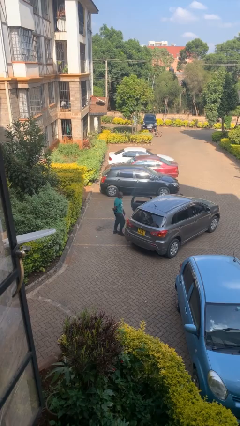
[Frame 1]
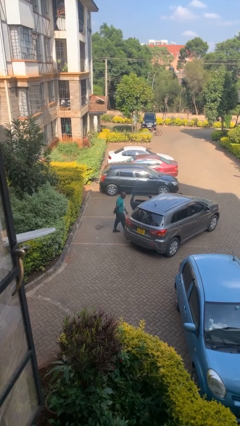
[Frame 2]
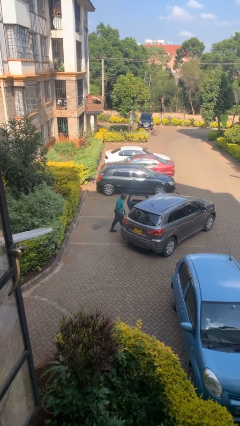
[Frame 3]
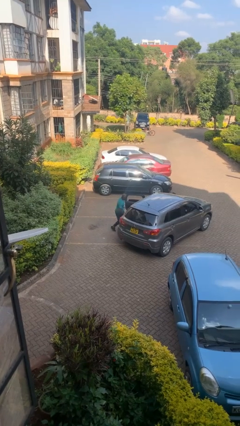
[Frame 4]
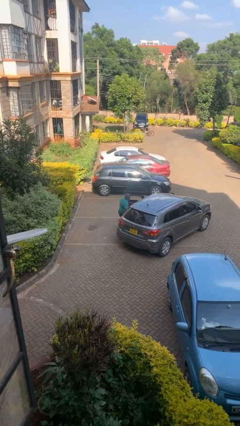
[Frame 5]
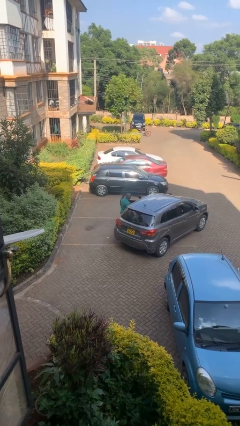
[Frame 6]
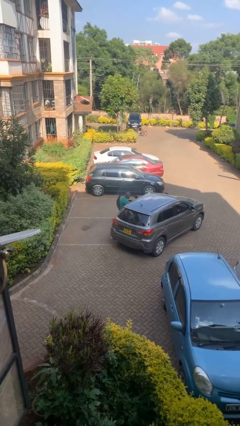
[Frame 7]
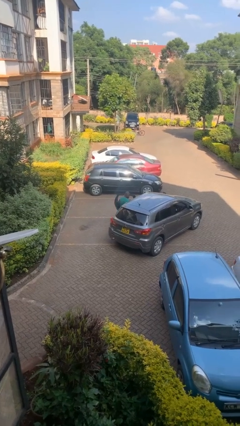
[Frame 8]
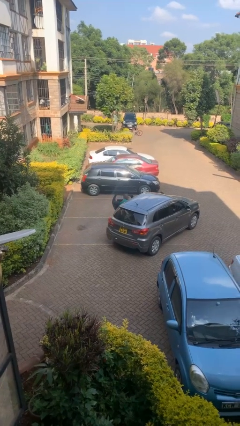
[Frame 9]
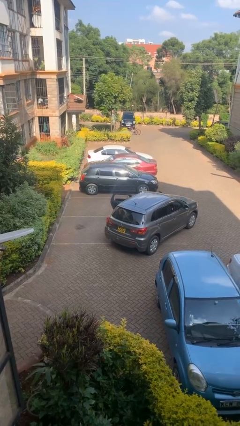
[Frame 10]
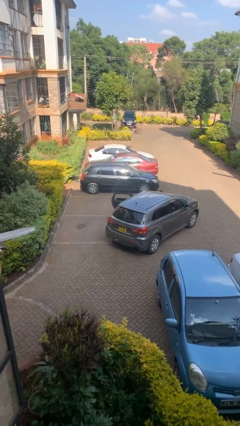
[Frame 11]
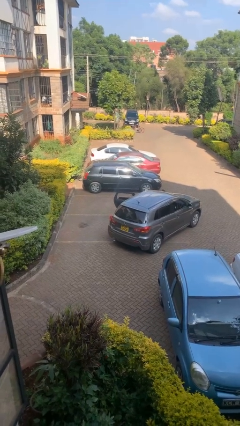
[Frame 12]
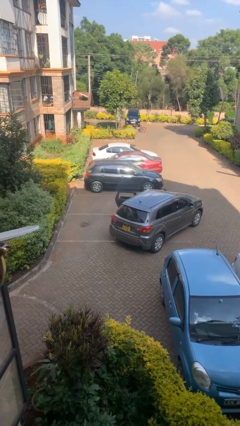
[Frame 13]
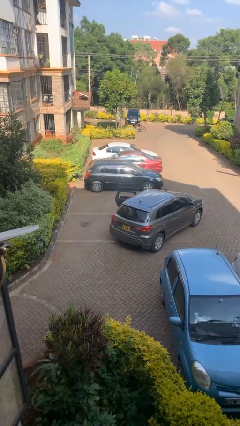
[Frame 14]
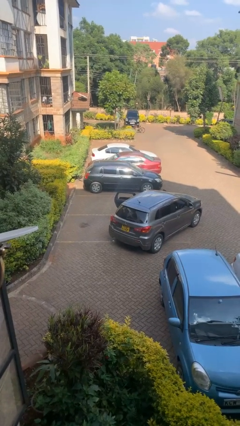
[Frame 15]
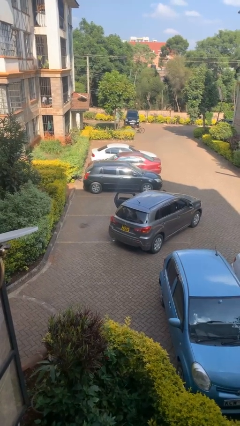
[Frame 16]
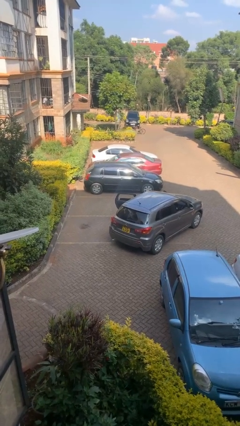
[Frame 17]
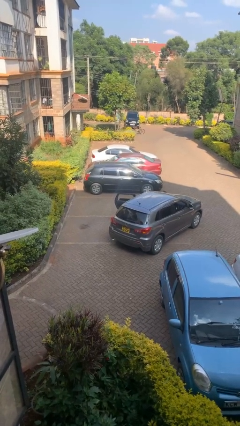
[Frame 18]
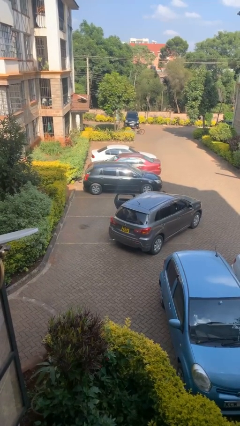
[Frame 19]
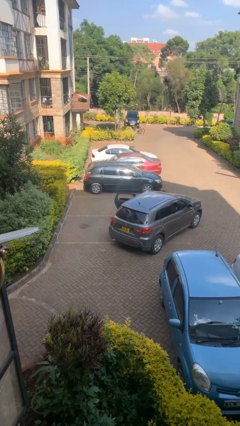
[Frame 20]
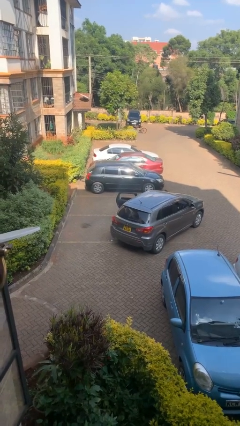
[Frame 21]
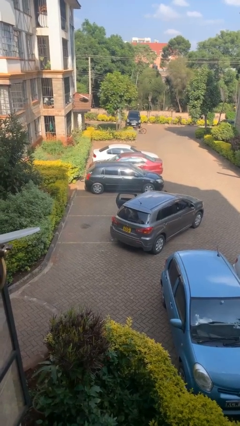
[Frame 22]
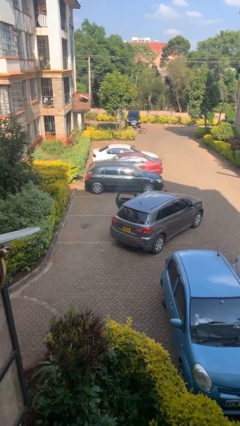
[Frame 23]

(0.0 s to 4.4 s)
person enters car

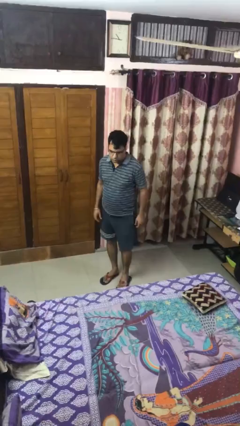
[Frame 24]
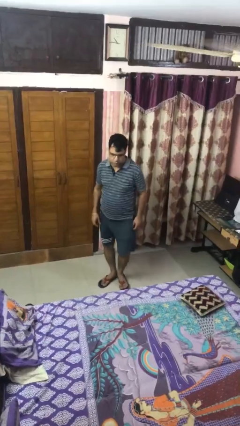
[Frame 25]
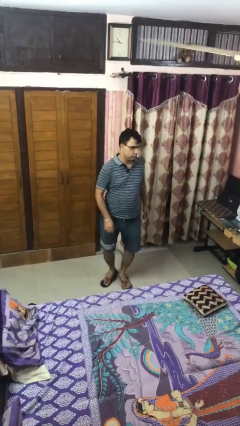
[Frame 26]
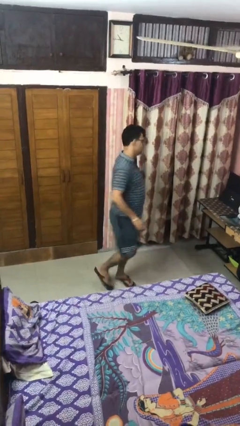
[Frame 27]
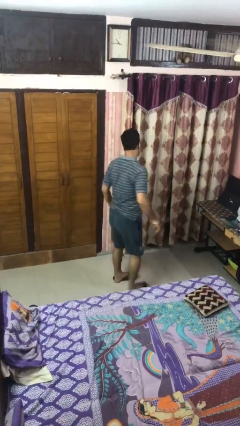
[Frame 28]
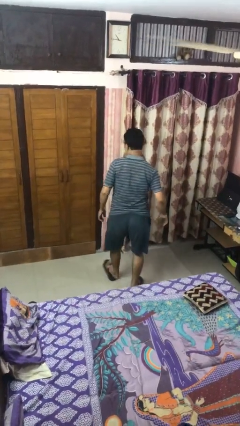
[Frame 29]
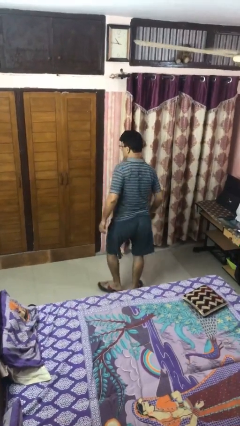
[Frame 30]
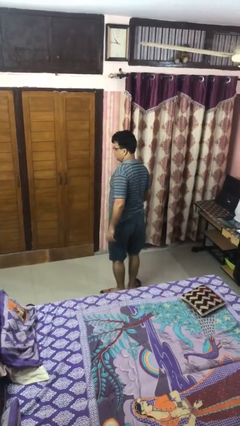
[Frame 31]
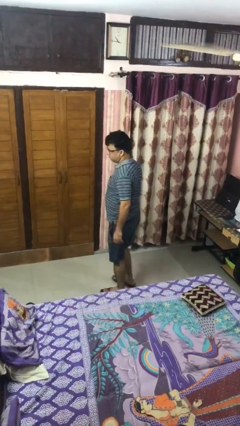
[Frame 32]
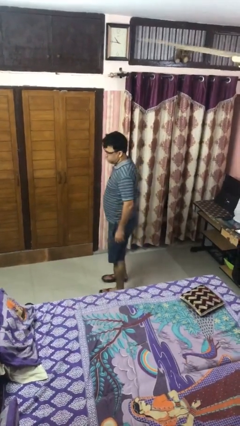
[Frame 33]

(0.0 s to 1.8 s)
person twirls

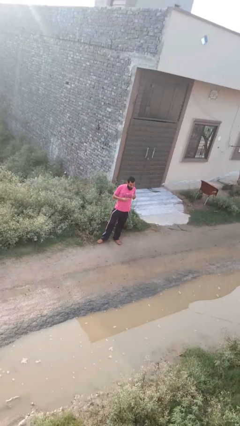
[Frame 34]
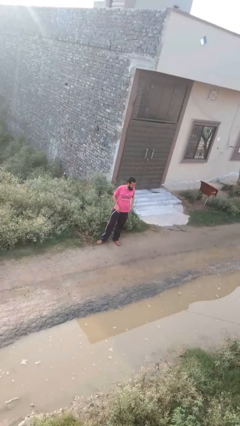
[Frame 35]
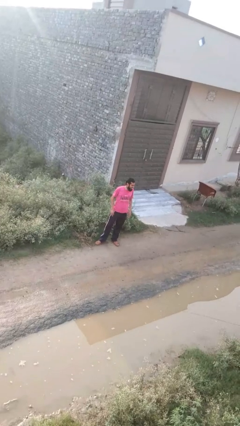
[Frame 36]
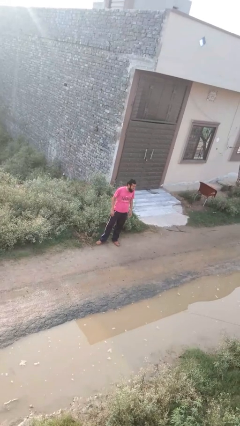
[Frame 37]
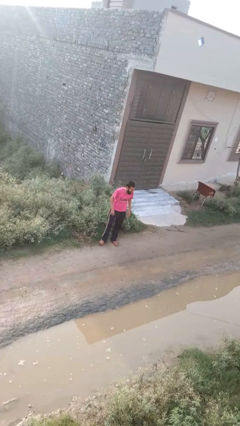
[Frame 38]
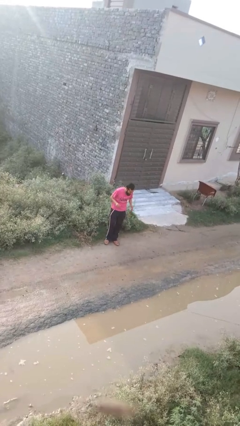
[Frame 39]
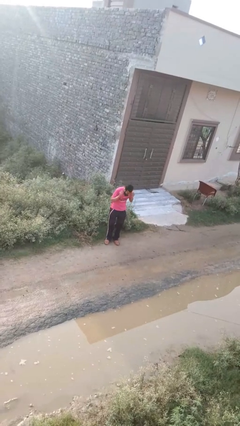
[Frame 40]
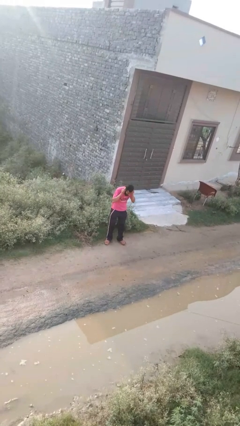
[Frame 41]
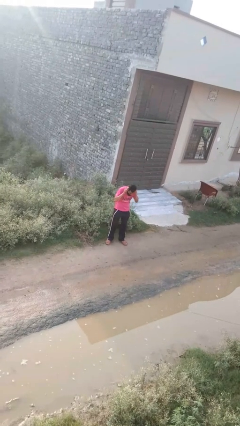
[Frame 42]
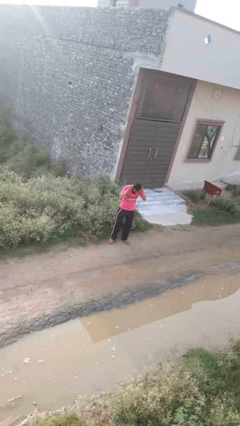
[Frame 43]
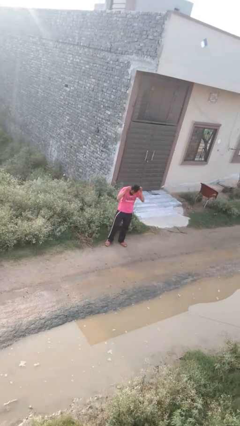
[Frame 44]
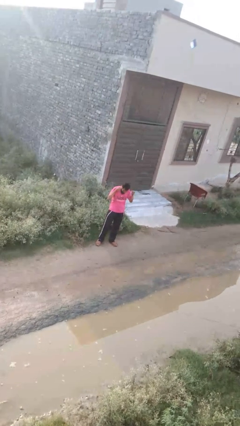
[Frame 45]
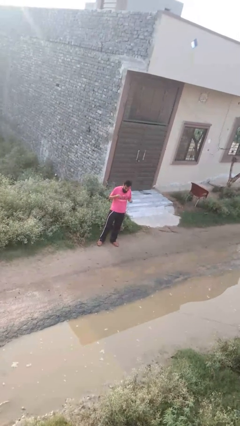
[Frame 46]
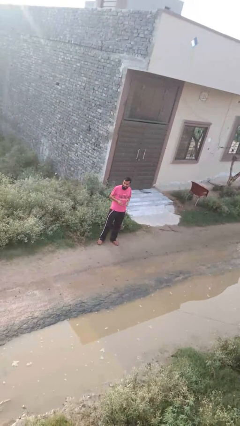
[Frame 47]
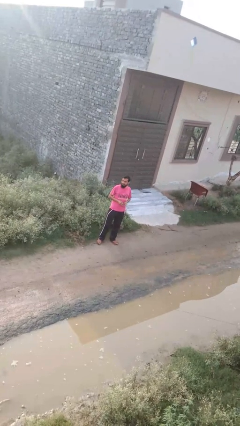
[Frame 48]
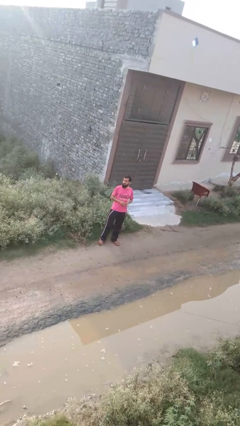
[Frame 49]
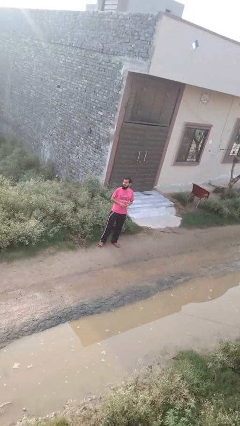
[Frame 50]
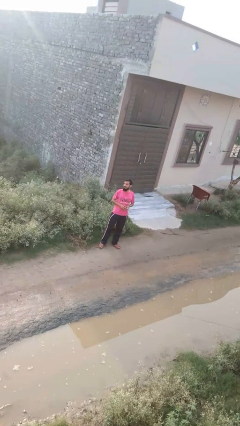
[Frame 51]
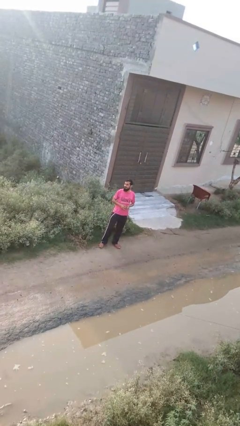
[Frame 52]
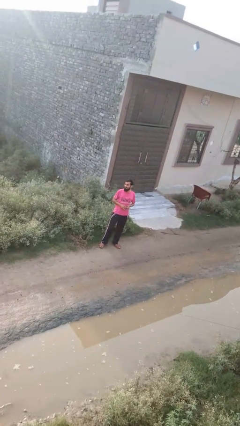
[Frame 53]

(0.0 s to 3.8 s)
person takes off earrings

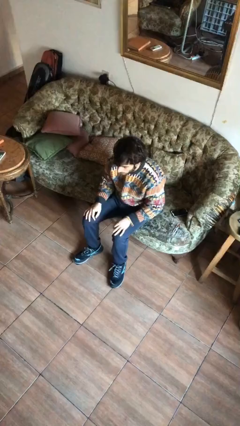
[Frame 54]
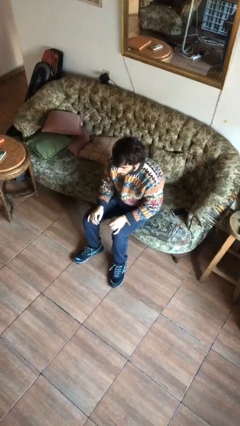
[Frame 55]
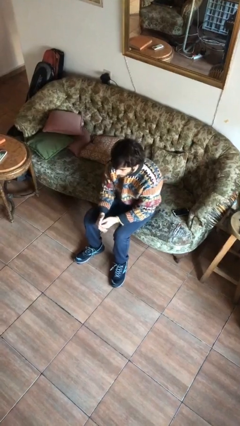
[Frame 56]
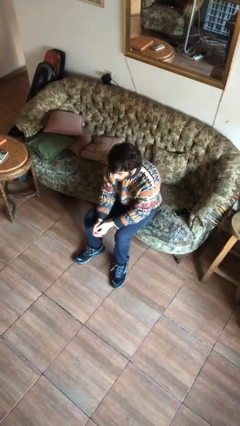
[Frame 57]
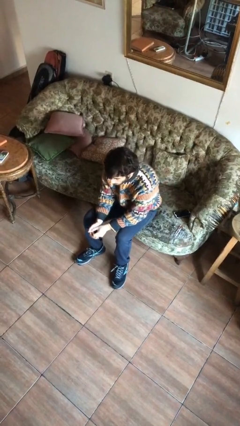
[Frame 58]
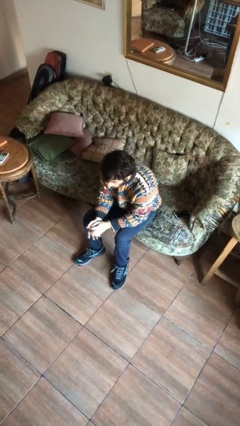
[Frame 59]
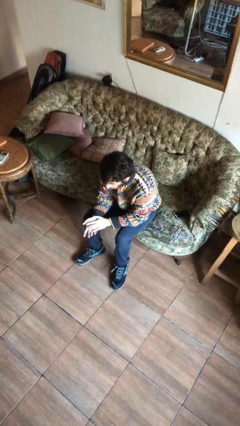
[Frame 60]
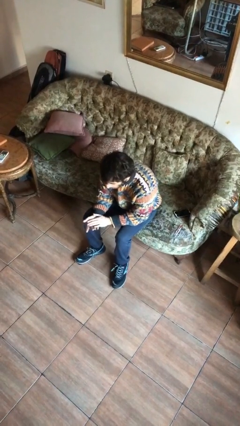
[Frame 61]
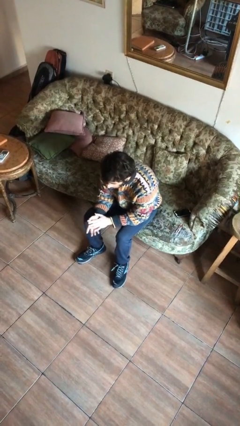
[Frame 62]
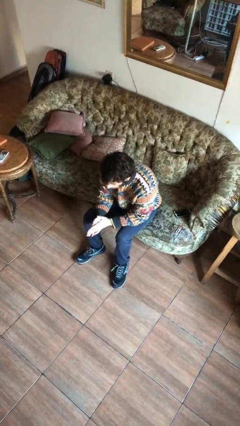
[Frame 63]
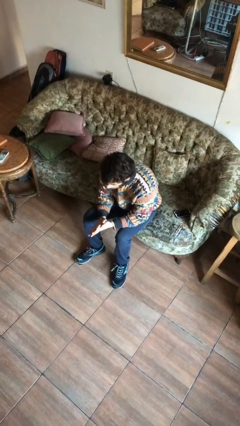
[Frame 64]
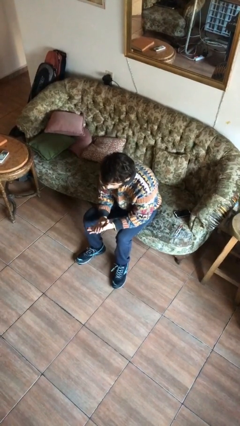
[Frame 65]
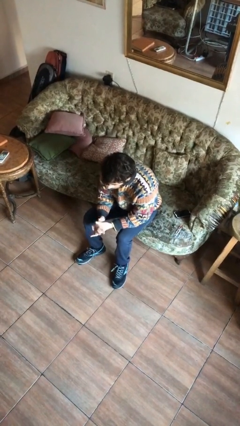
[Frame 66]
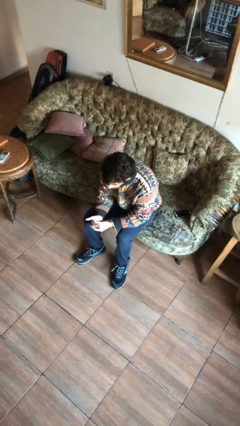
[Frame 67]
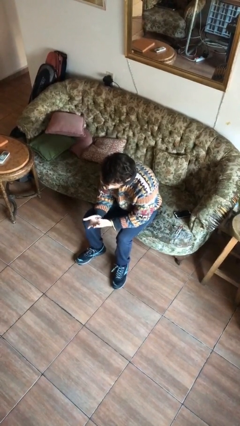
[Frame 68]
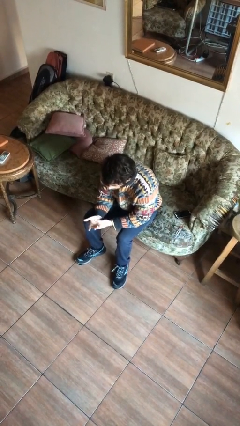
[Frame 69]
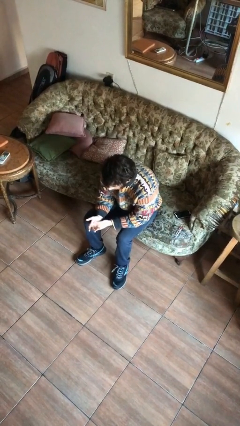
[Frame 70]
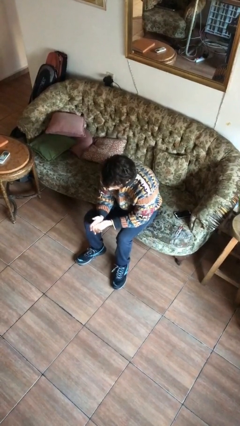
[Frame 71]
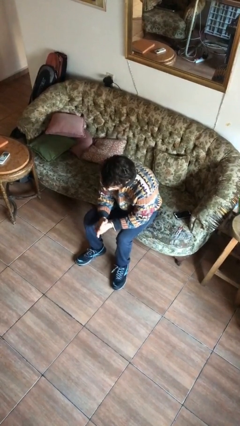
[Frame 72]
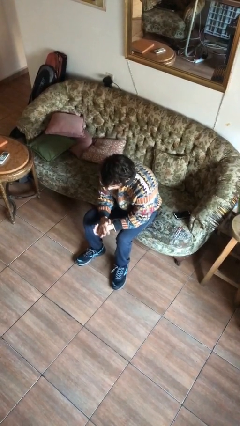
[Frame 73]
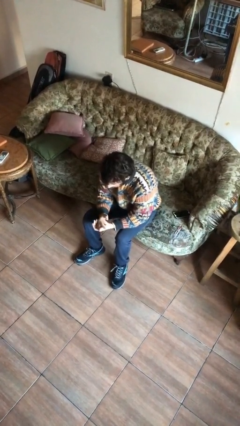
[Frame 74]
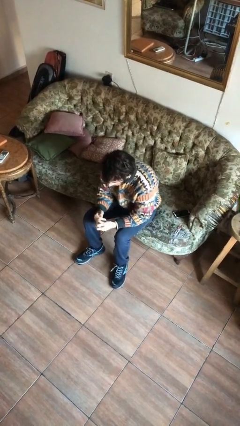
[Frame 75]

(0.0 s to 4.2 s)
person looks at hands in lap

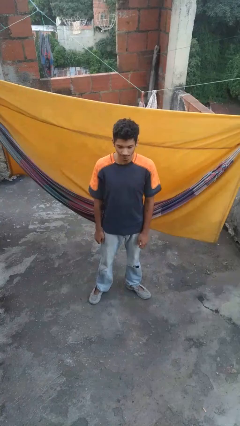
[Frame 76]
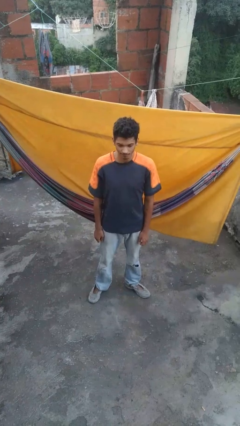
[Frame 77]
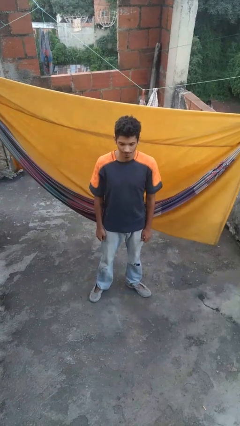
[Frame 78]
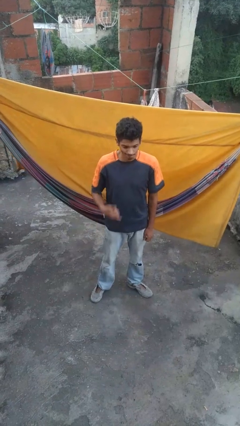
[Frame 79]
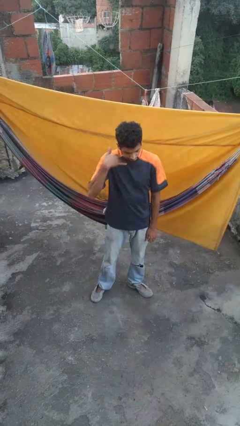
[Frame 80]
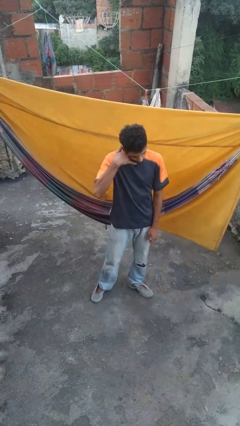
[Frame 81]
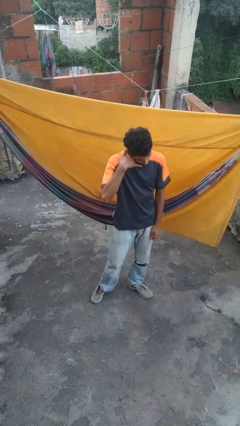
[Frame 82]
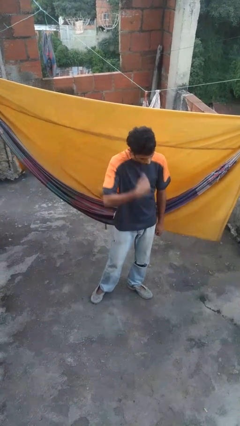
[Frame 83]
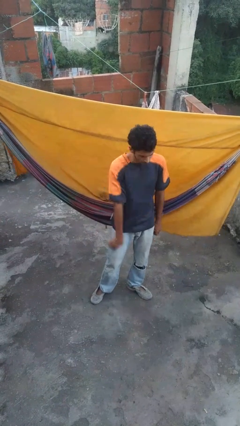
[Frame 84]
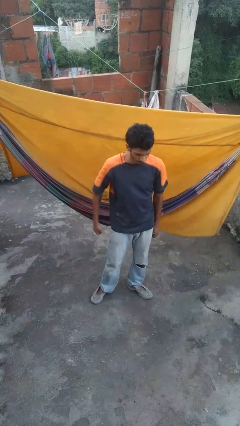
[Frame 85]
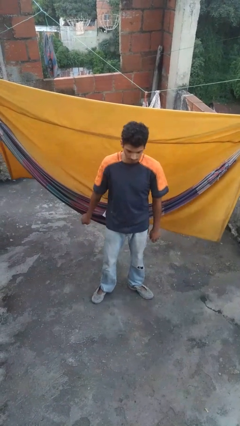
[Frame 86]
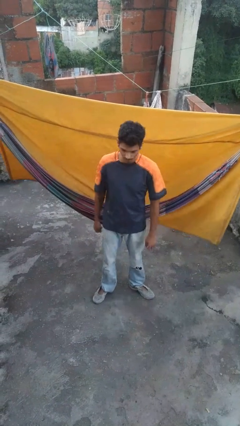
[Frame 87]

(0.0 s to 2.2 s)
person gestures call me

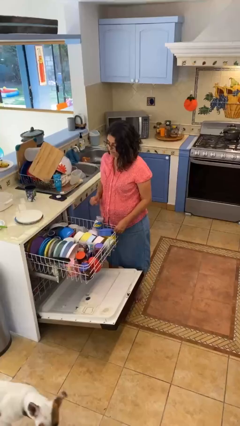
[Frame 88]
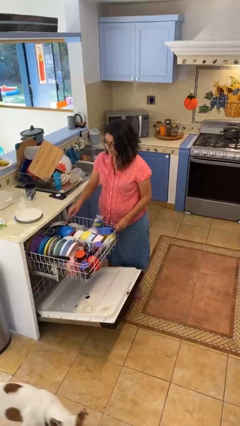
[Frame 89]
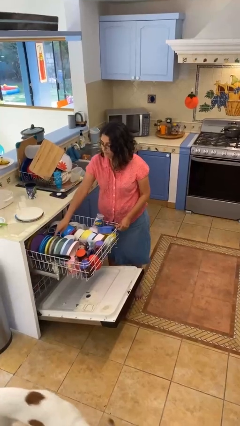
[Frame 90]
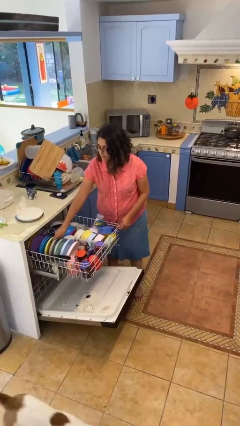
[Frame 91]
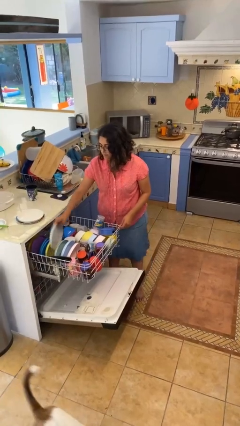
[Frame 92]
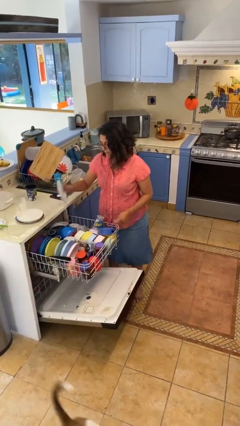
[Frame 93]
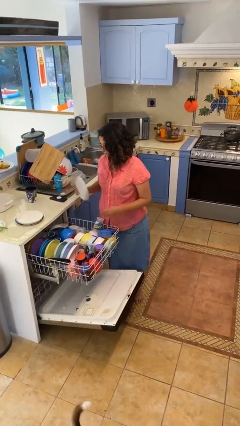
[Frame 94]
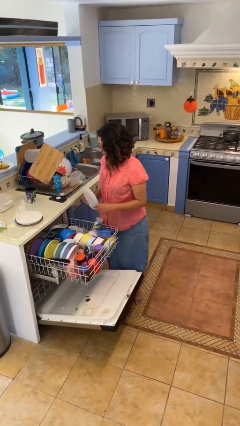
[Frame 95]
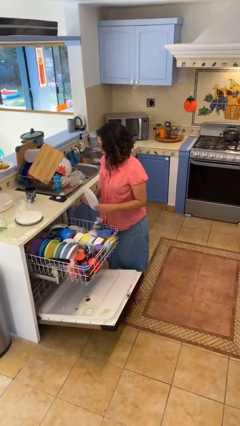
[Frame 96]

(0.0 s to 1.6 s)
person unloads dishwasher
